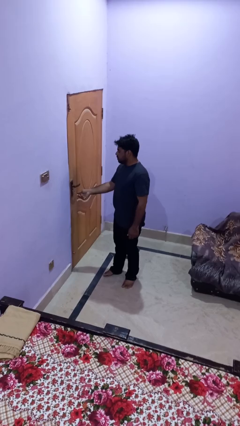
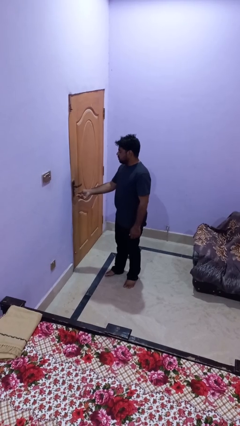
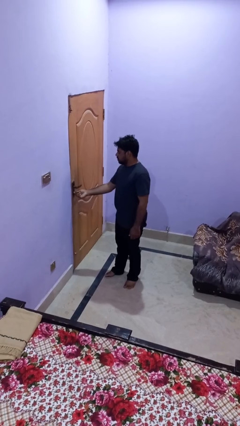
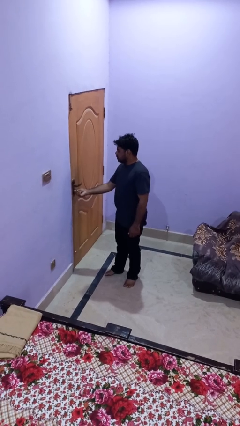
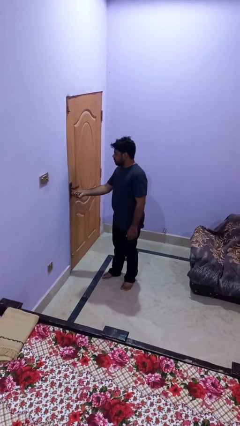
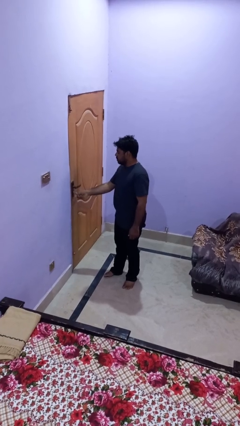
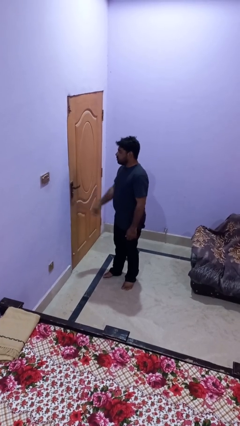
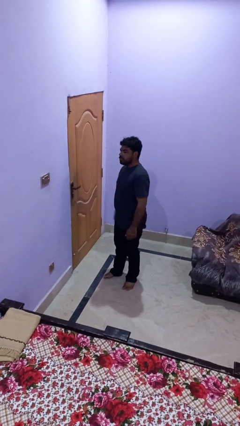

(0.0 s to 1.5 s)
person locks door with keys

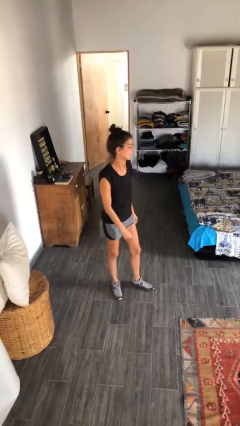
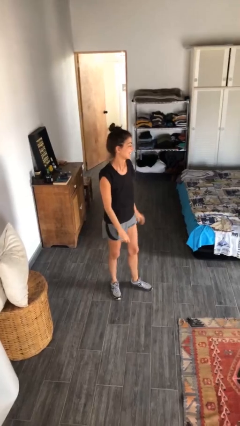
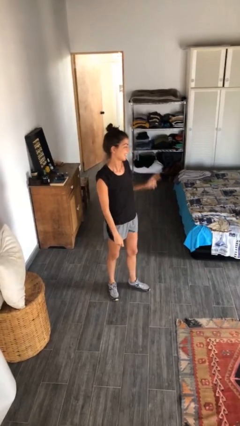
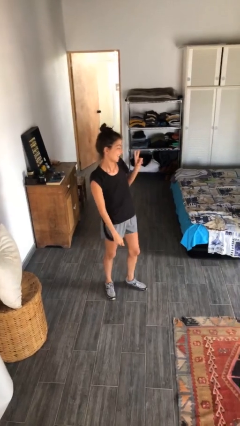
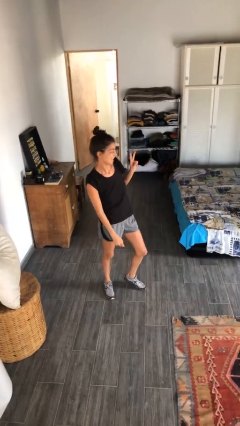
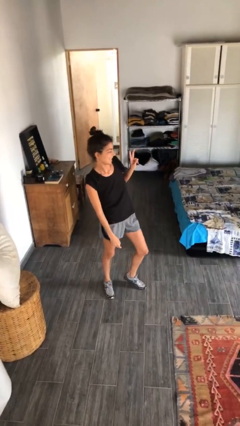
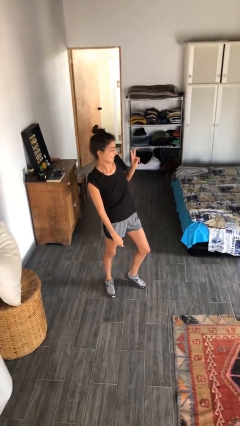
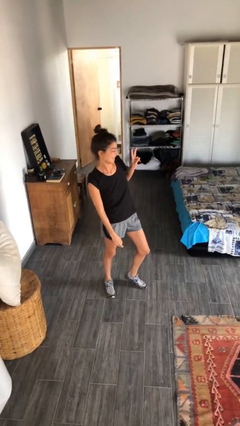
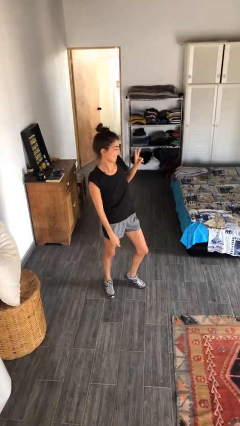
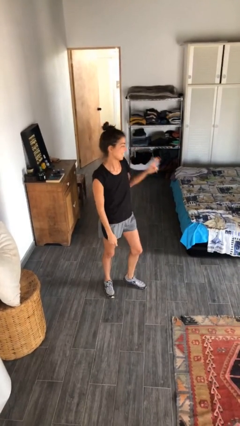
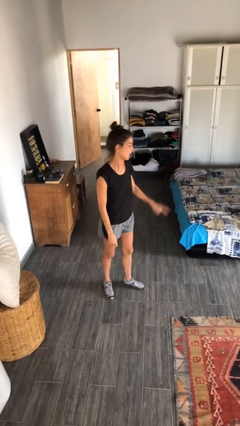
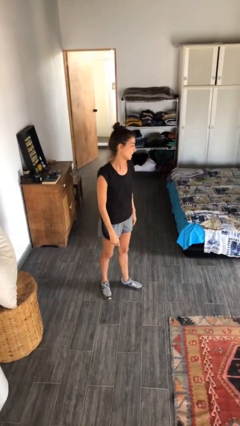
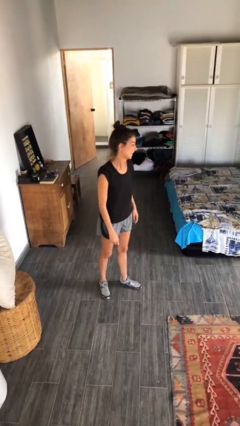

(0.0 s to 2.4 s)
person gestures peace

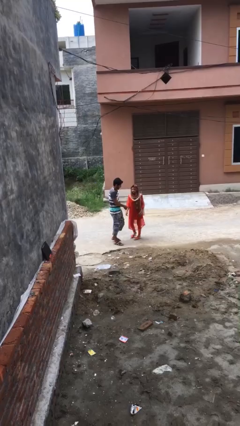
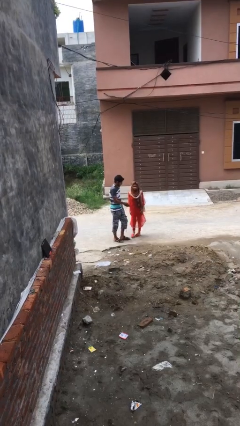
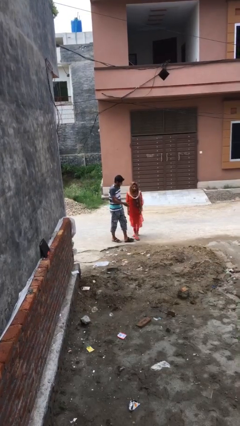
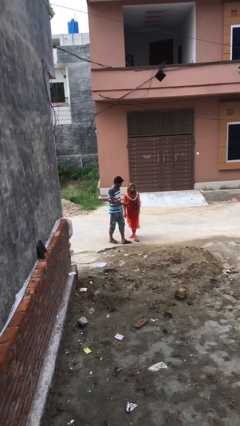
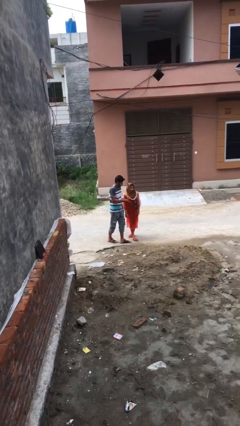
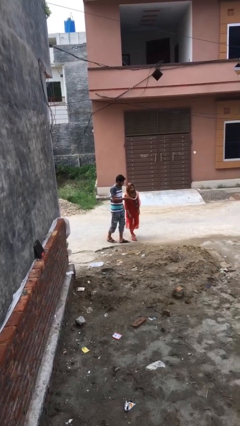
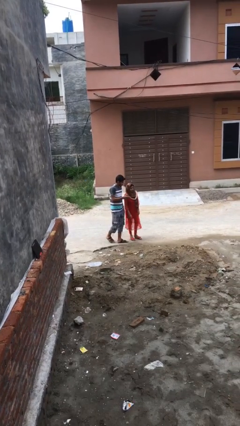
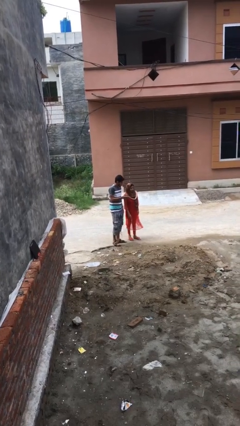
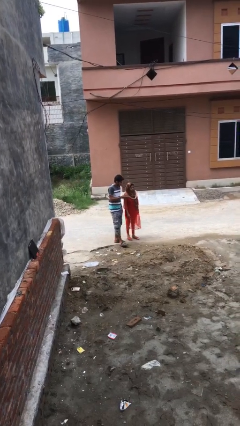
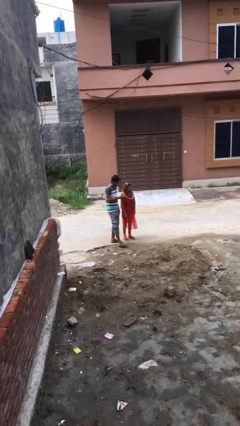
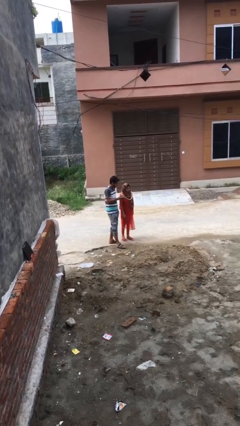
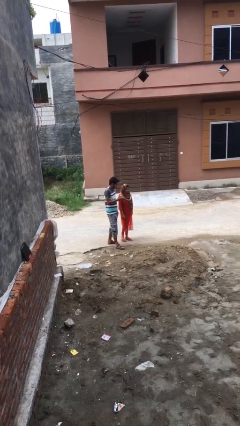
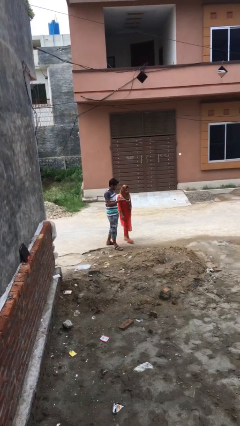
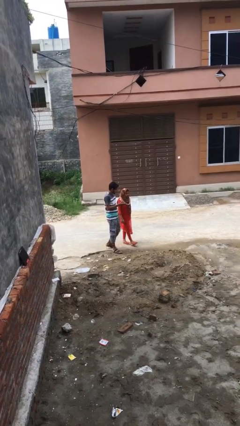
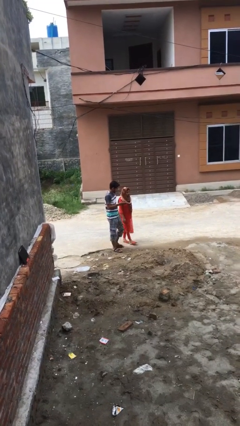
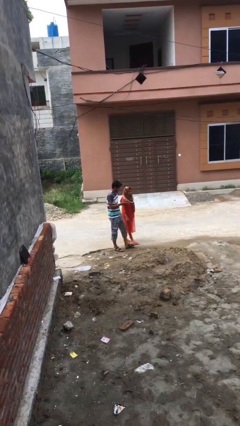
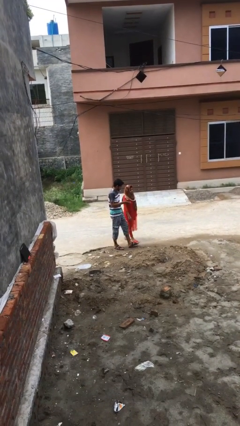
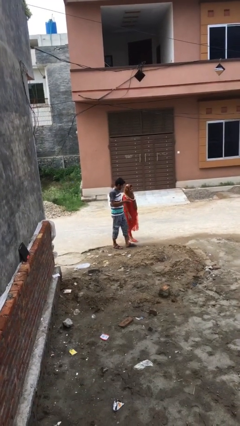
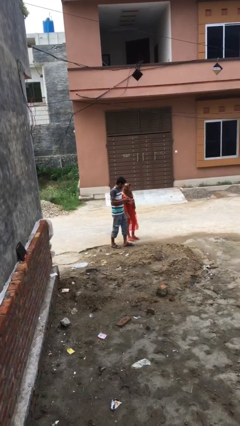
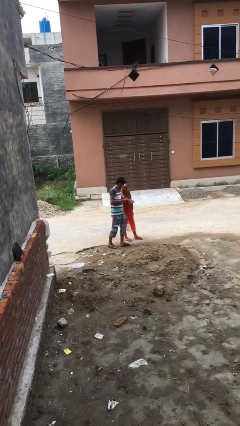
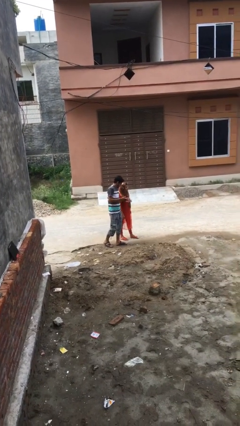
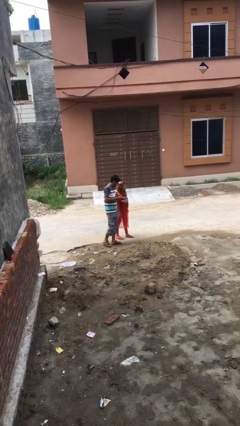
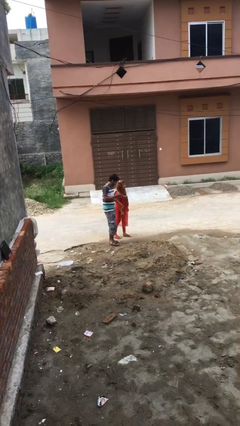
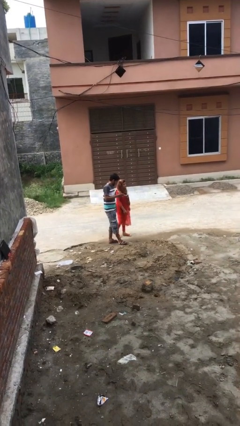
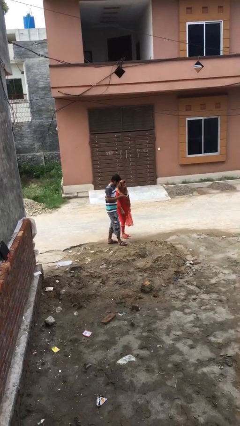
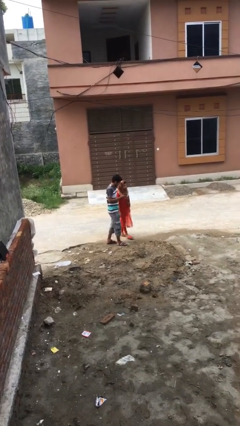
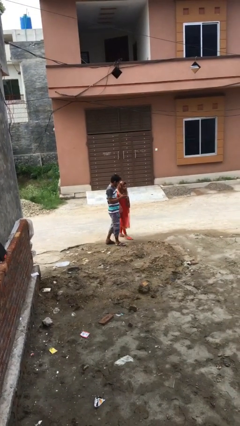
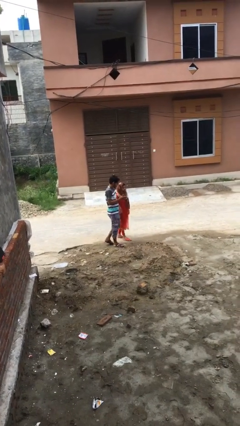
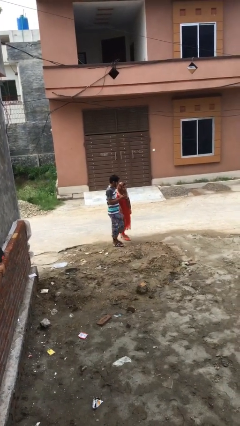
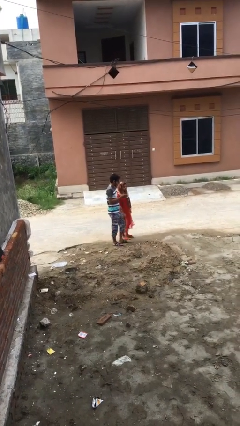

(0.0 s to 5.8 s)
person talks to person

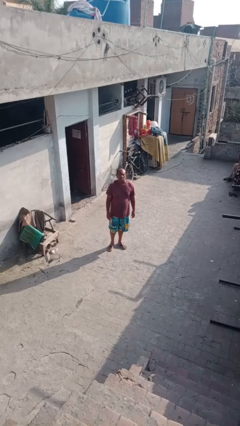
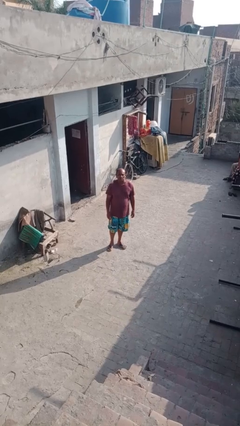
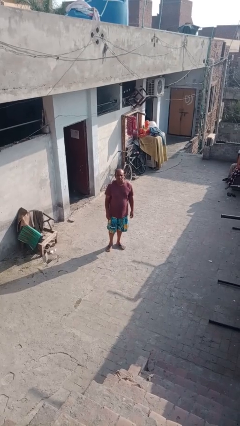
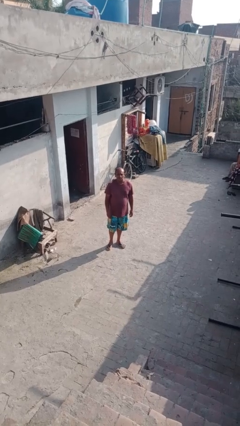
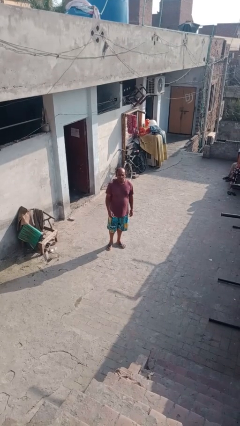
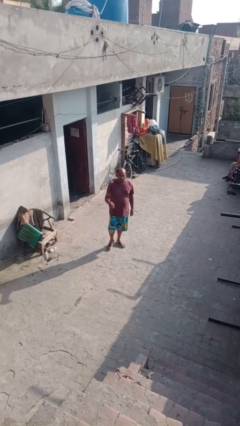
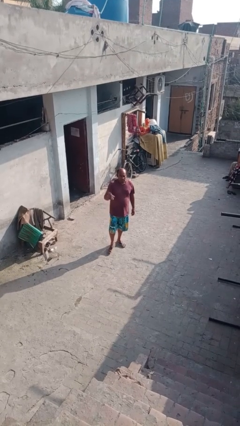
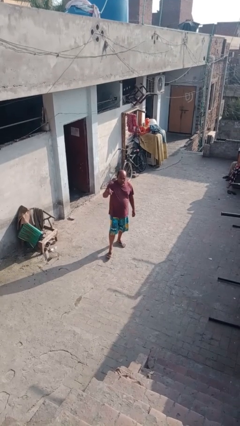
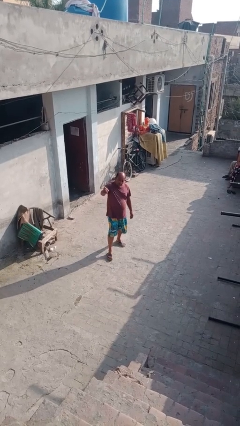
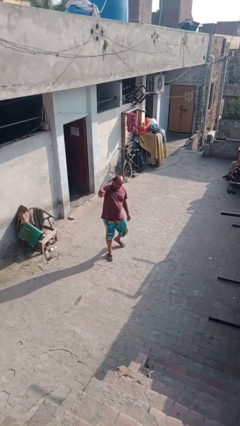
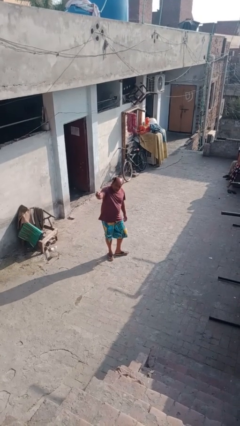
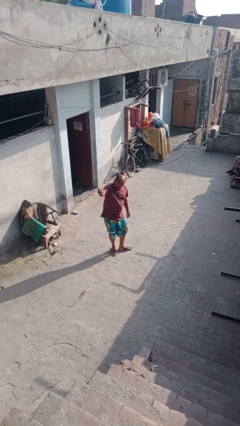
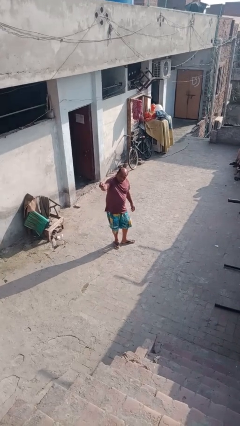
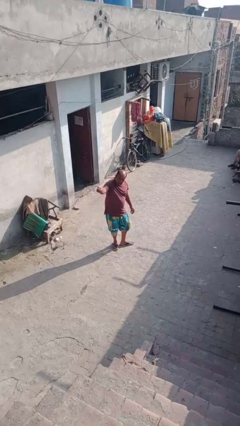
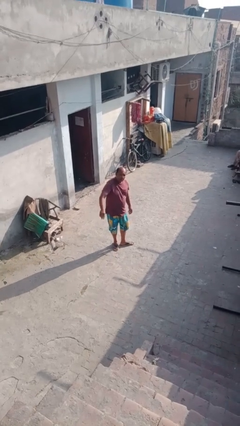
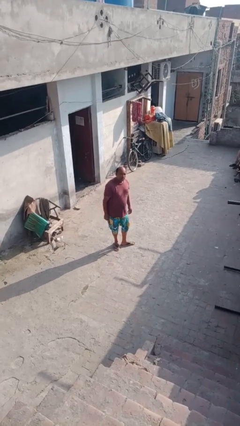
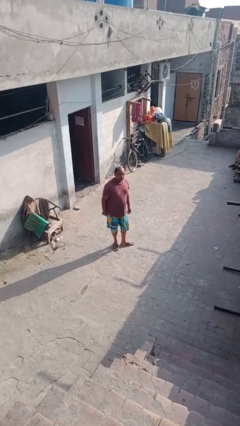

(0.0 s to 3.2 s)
person points at person

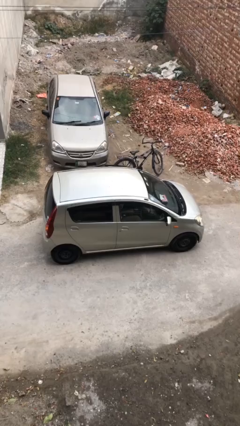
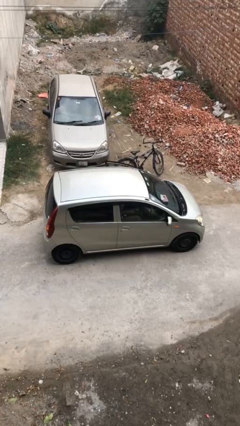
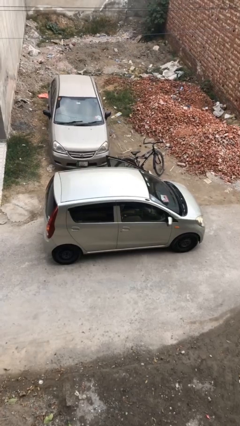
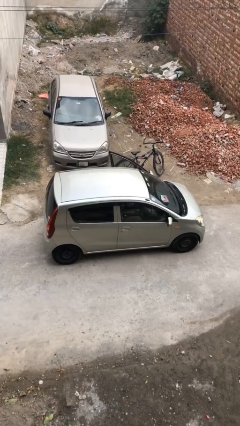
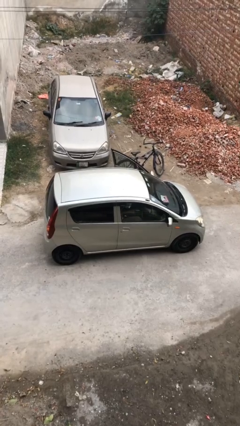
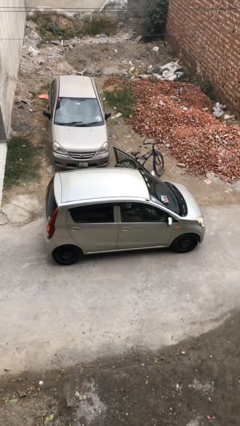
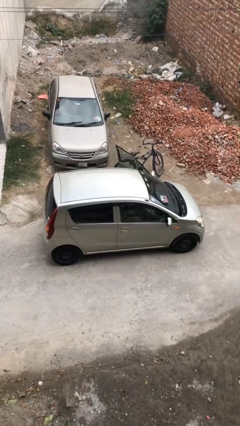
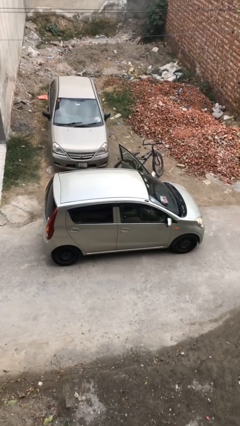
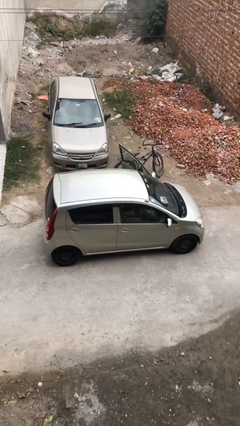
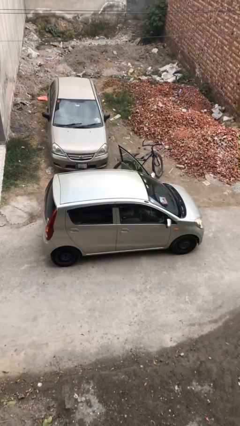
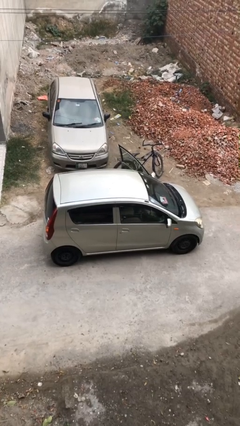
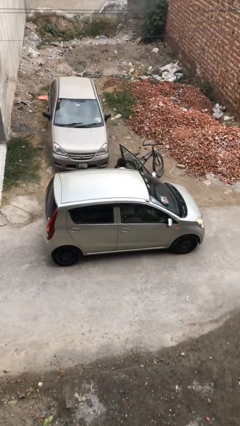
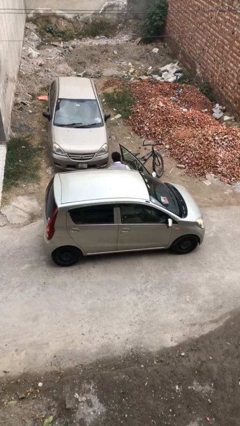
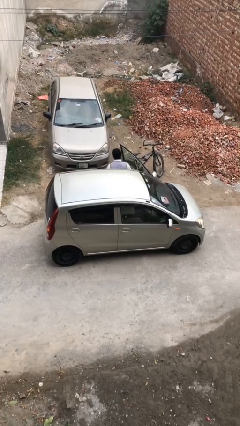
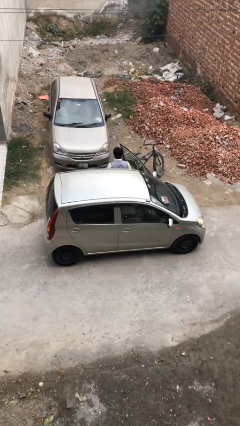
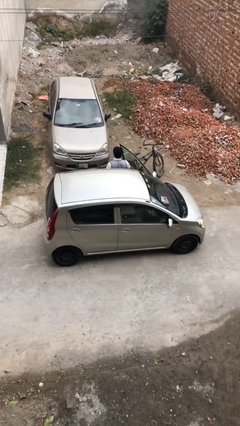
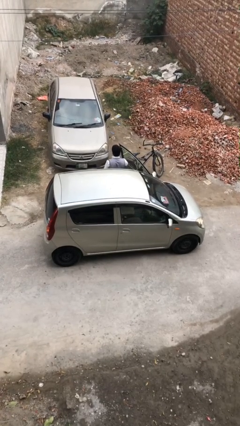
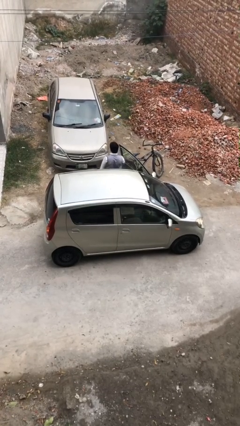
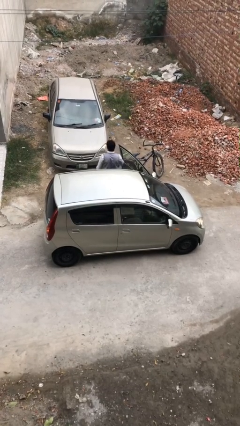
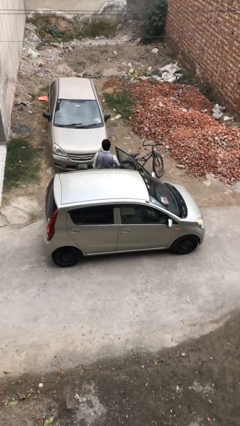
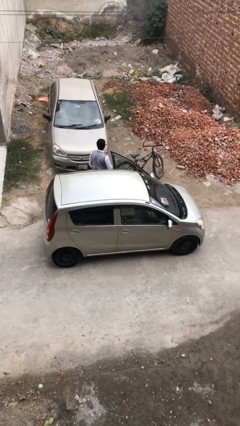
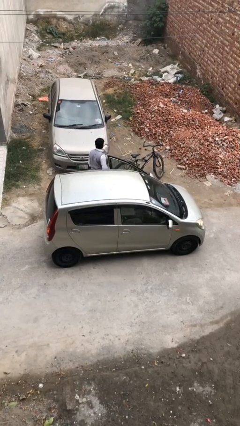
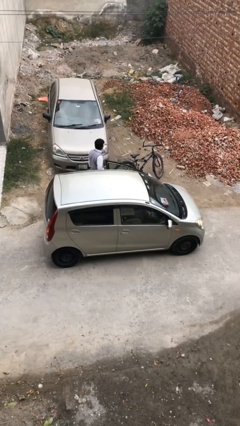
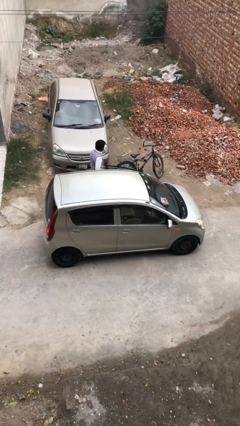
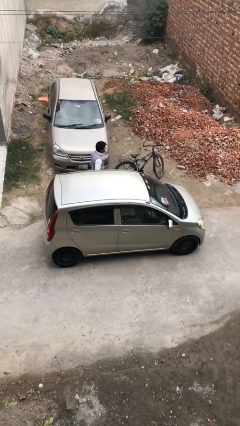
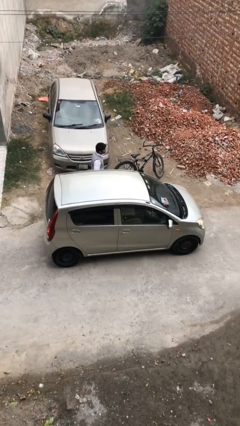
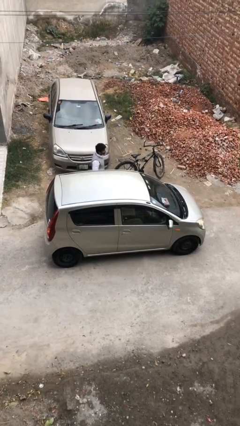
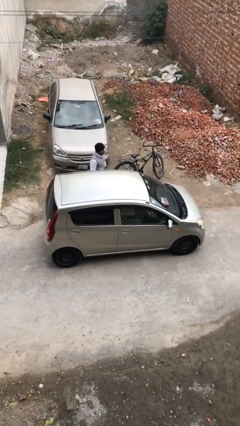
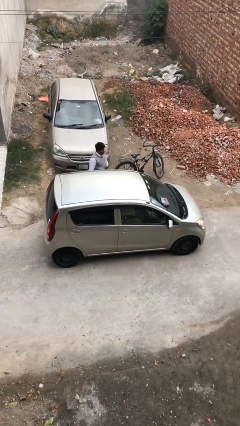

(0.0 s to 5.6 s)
car drops off person
